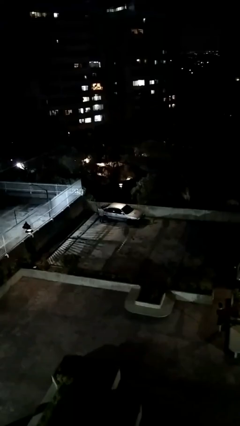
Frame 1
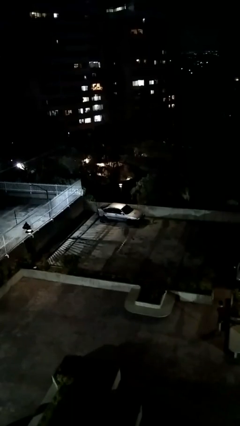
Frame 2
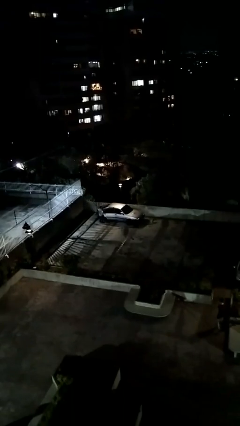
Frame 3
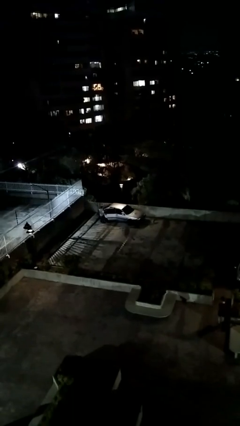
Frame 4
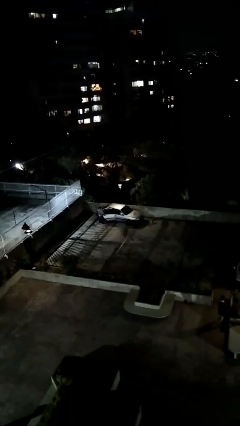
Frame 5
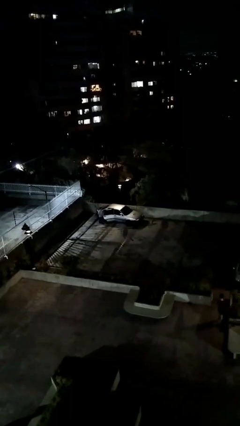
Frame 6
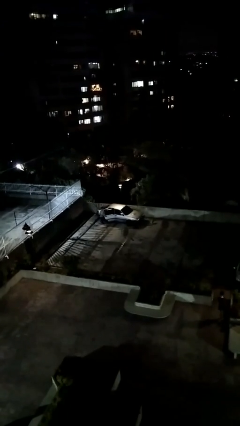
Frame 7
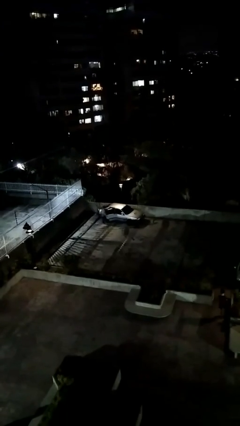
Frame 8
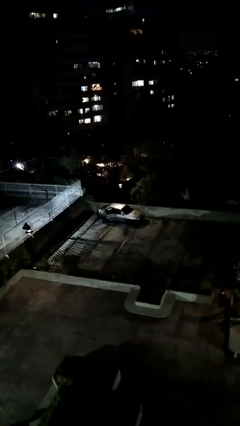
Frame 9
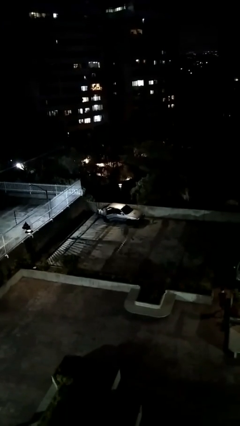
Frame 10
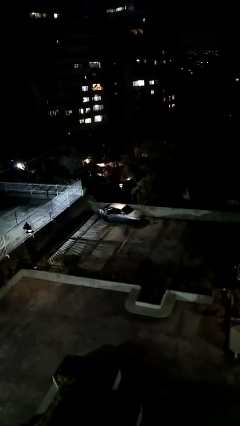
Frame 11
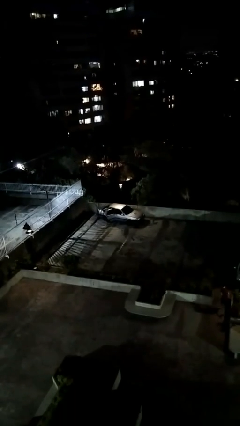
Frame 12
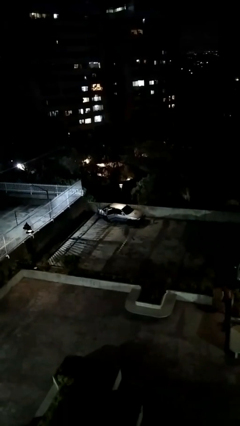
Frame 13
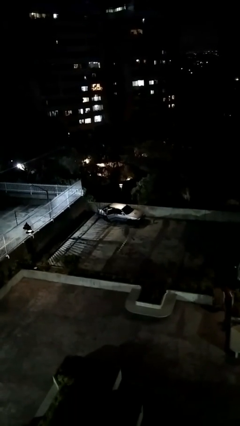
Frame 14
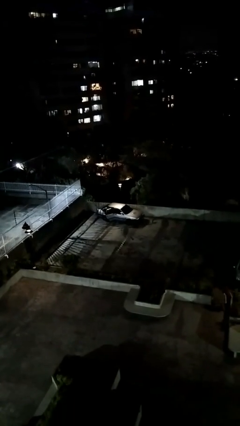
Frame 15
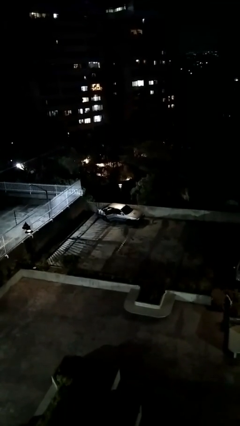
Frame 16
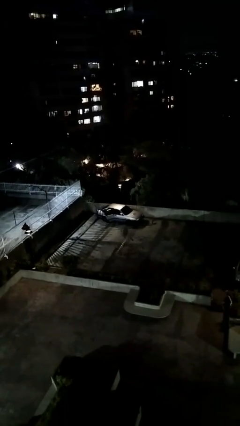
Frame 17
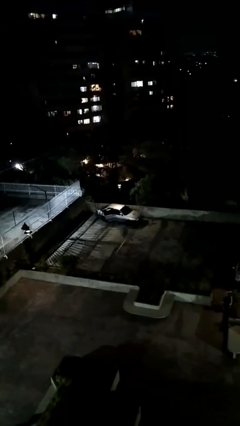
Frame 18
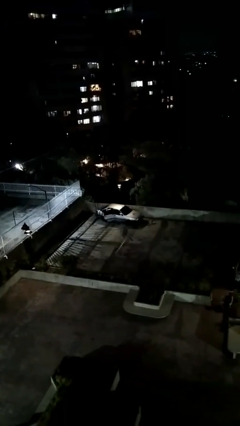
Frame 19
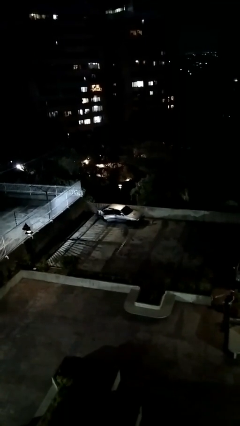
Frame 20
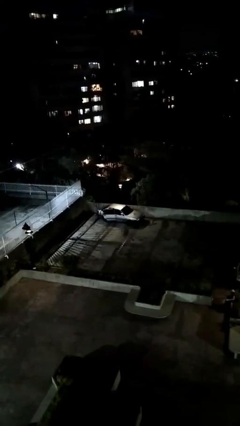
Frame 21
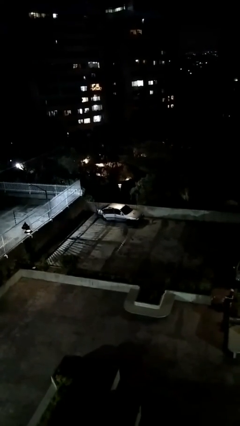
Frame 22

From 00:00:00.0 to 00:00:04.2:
car picks up person

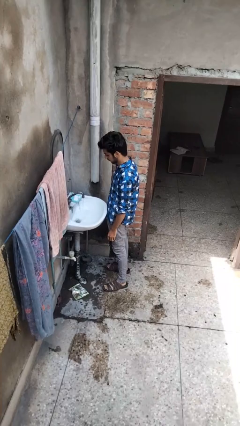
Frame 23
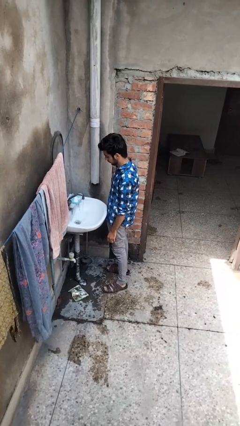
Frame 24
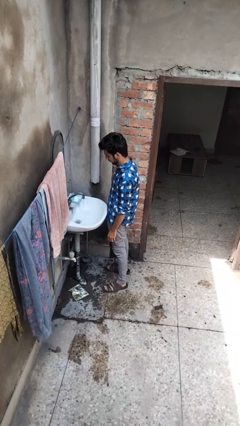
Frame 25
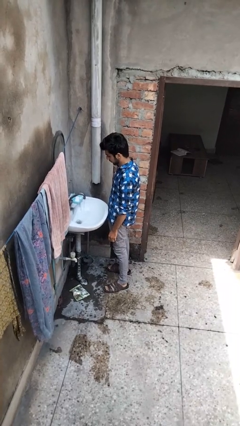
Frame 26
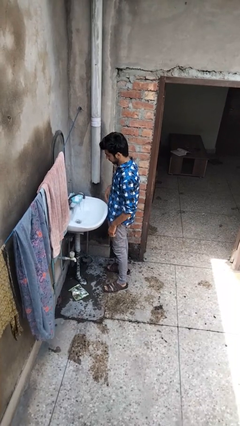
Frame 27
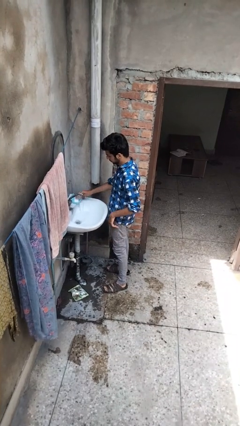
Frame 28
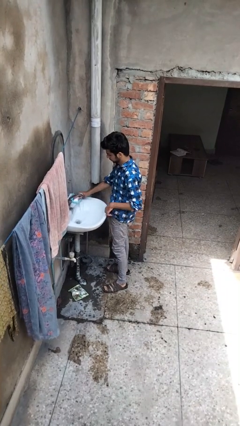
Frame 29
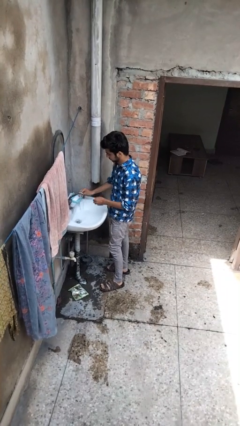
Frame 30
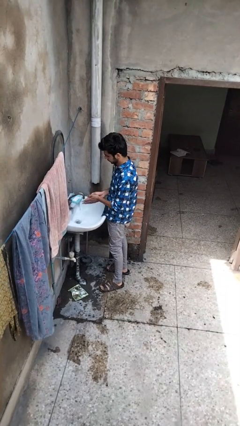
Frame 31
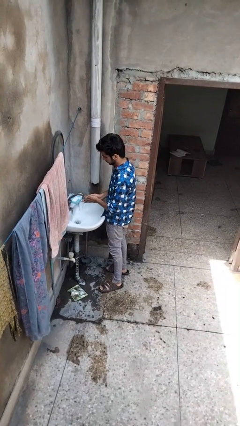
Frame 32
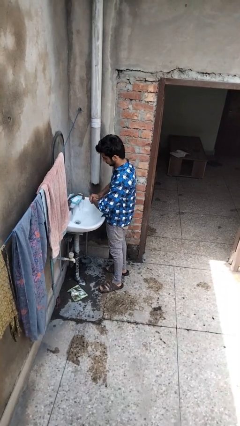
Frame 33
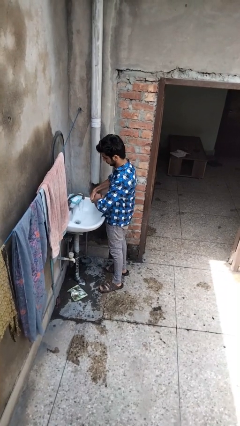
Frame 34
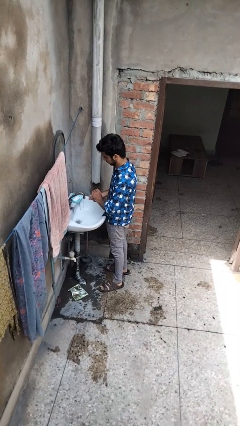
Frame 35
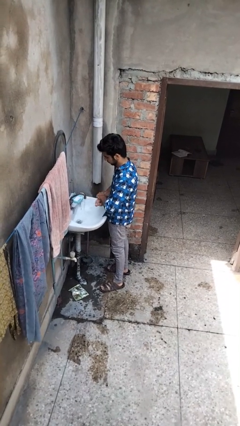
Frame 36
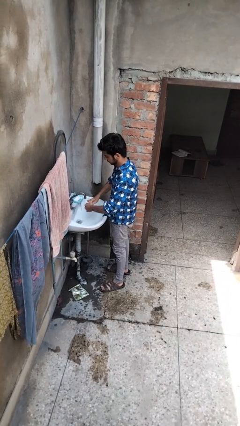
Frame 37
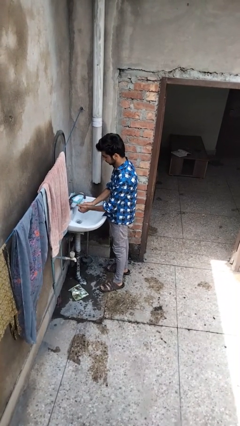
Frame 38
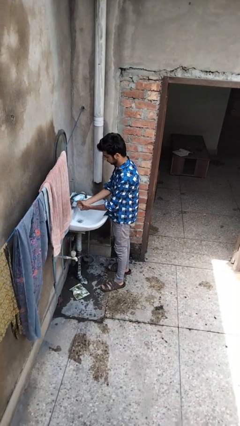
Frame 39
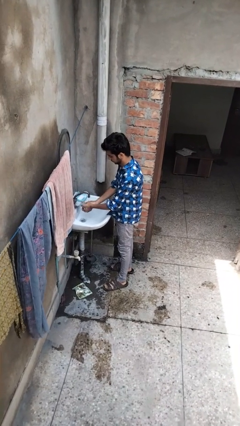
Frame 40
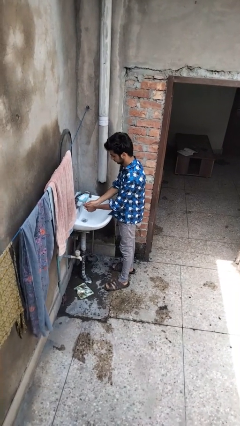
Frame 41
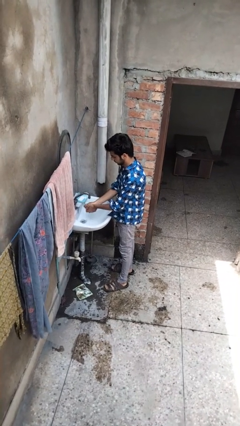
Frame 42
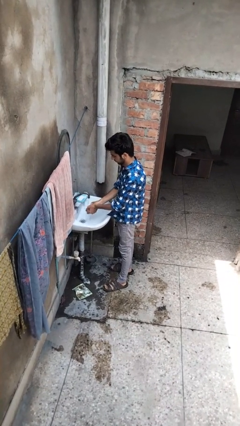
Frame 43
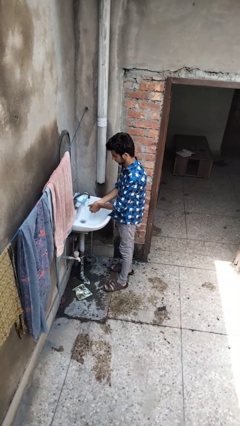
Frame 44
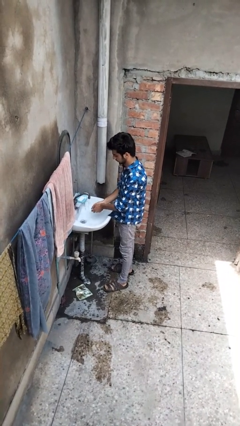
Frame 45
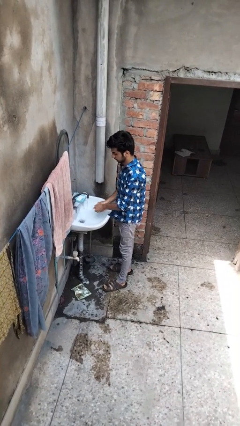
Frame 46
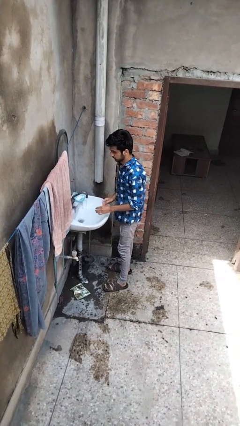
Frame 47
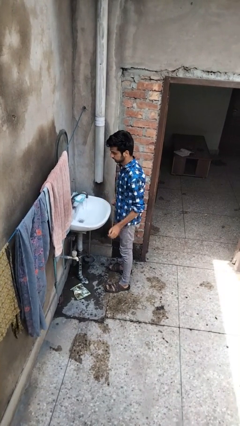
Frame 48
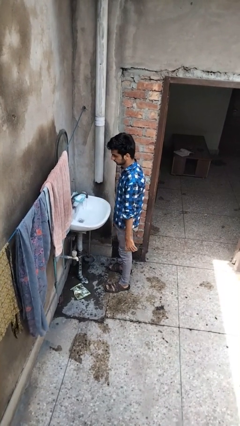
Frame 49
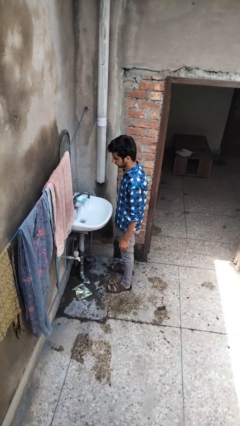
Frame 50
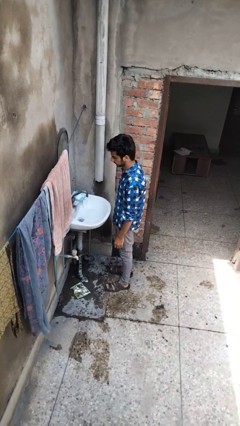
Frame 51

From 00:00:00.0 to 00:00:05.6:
person washes hands

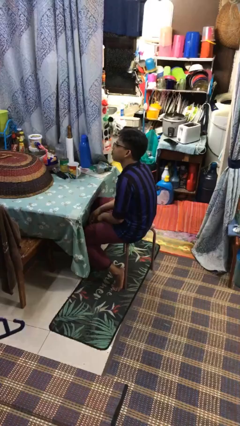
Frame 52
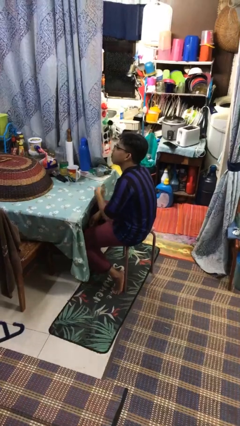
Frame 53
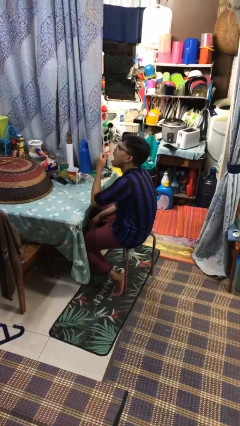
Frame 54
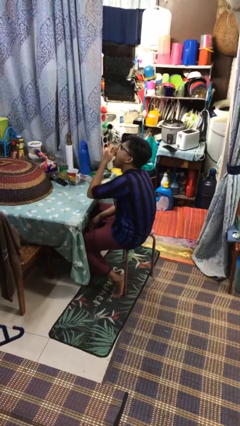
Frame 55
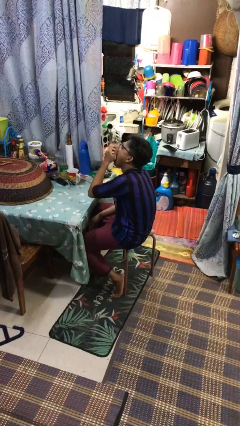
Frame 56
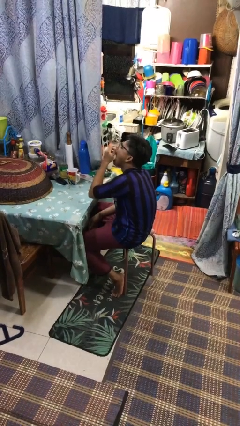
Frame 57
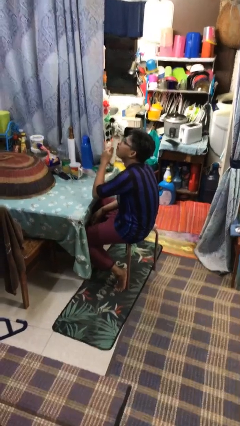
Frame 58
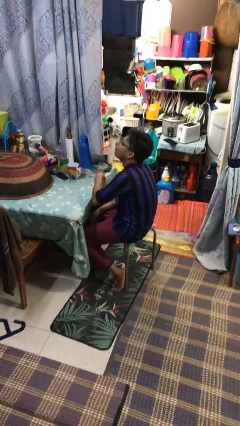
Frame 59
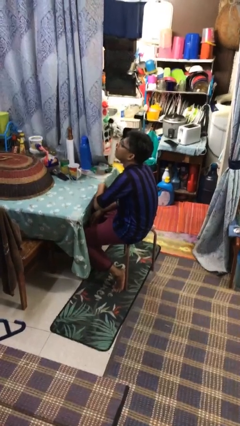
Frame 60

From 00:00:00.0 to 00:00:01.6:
person yawns

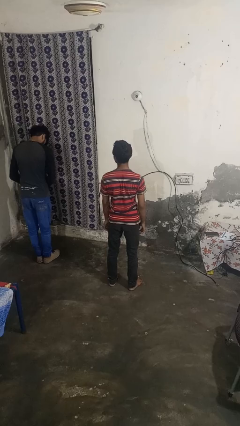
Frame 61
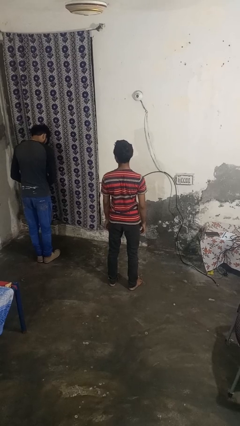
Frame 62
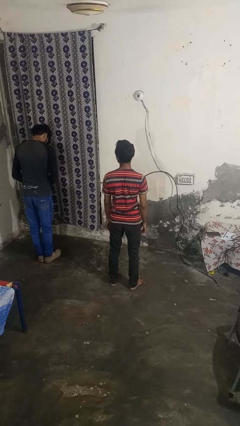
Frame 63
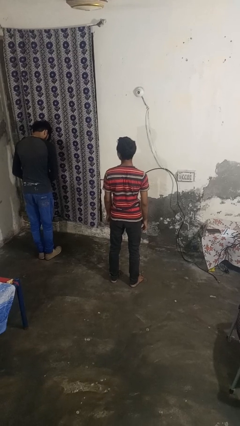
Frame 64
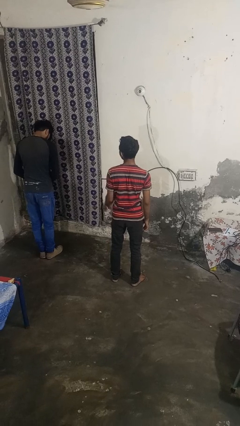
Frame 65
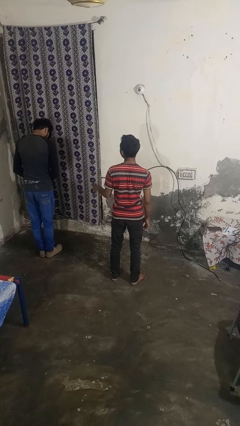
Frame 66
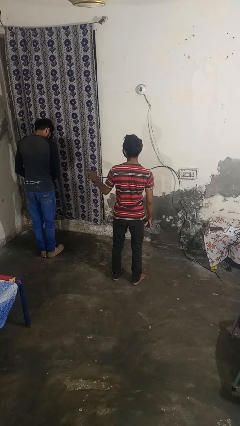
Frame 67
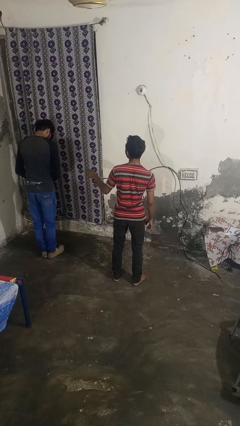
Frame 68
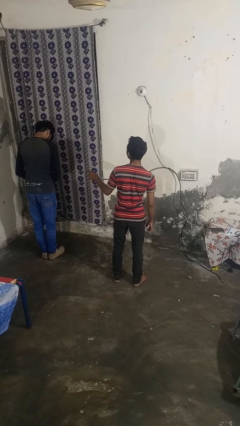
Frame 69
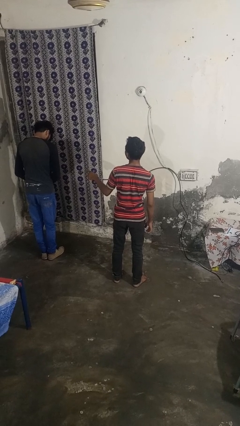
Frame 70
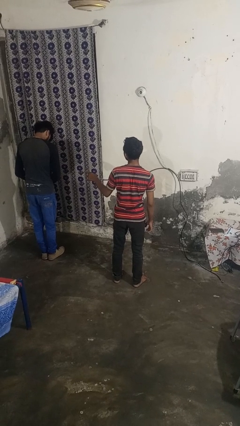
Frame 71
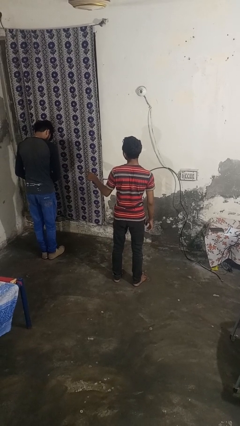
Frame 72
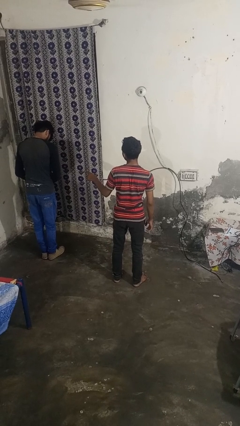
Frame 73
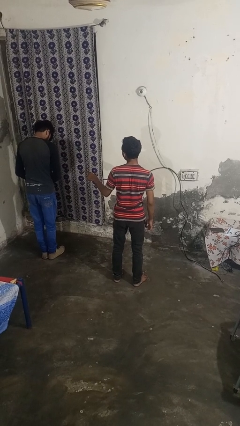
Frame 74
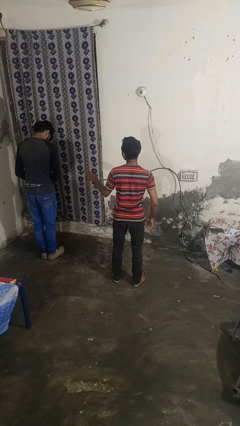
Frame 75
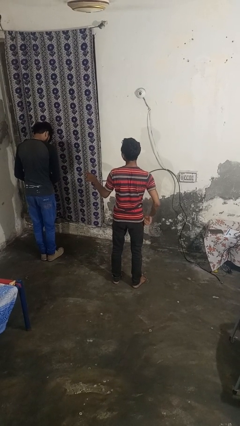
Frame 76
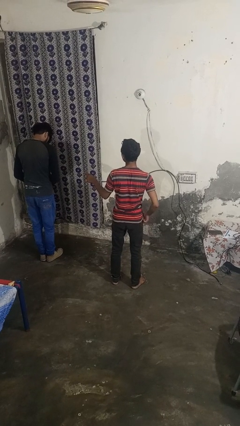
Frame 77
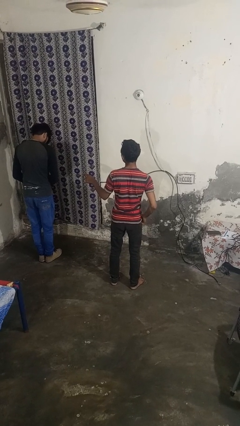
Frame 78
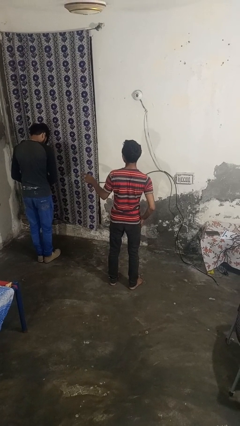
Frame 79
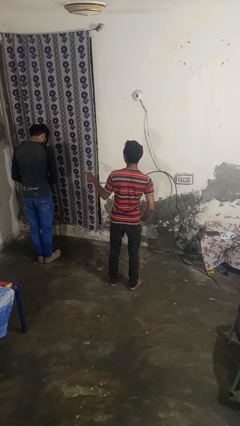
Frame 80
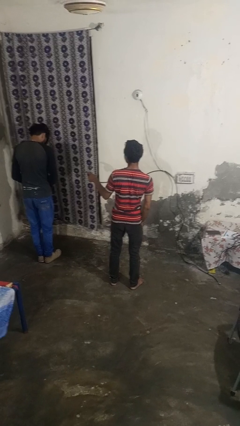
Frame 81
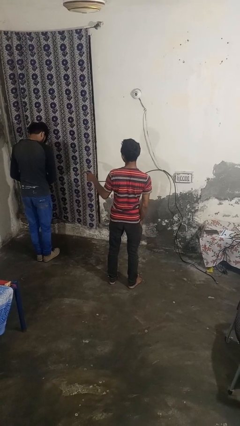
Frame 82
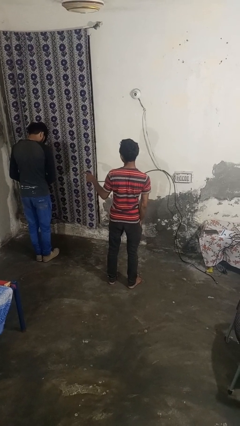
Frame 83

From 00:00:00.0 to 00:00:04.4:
person points at person

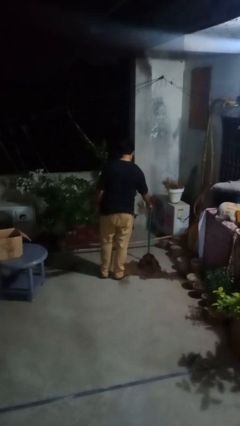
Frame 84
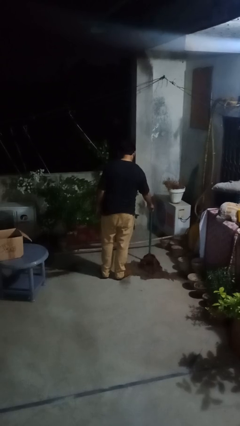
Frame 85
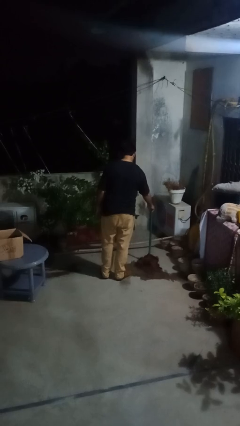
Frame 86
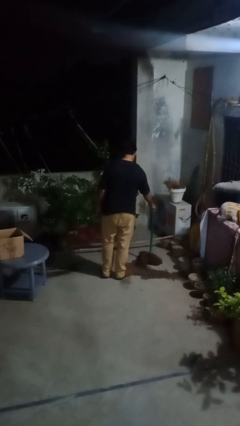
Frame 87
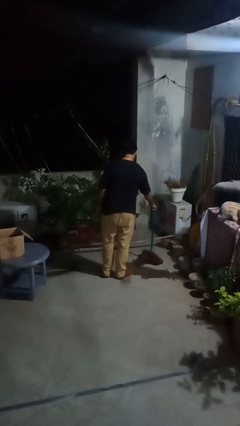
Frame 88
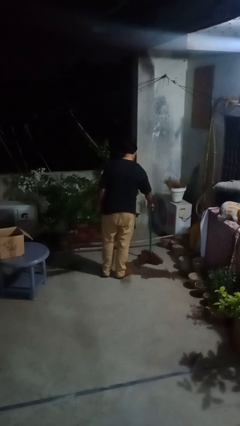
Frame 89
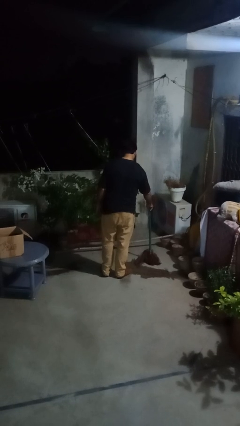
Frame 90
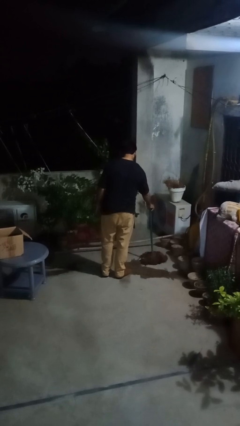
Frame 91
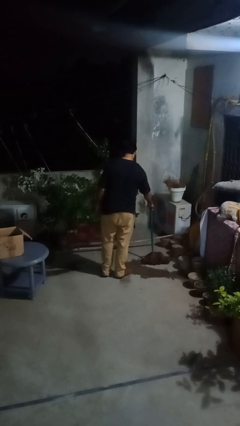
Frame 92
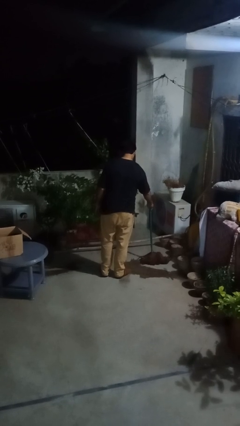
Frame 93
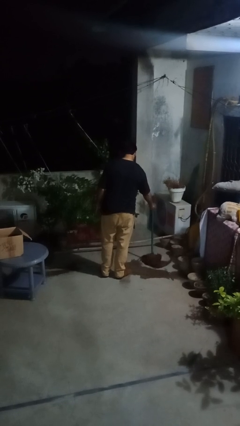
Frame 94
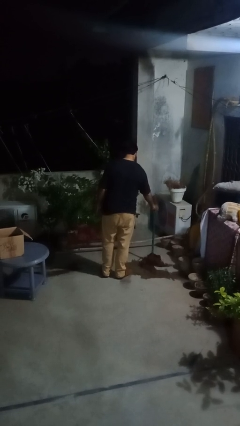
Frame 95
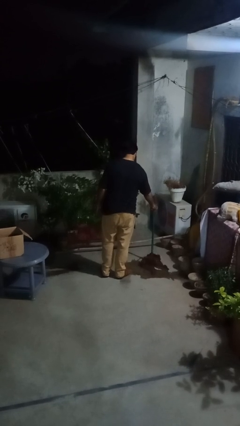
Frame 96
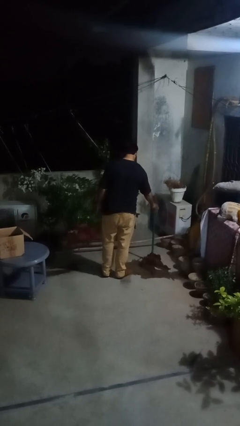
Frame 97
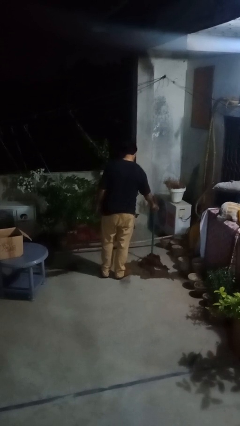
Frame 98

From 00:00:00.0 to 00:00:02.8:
person mops
